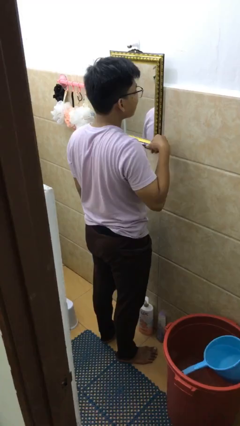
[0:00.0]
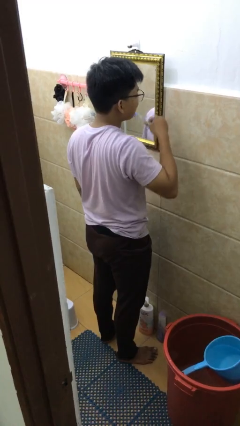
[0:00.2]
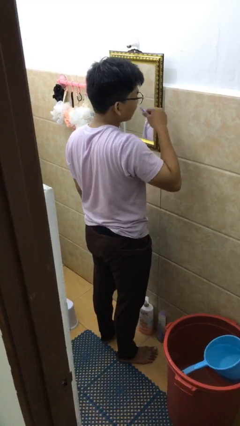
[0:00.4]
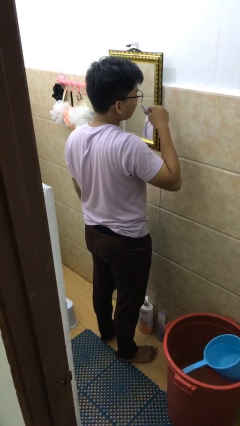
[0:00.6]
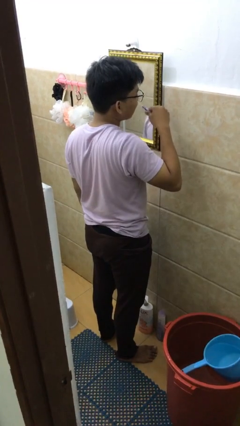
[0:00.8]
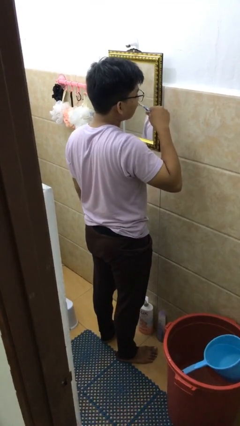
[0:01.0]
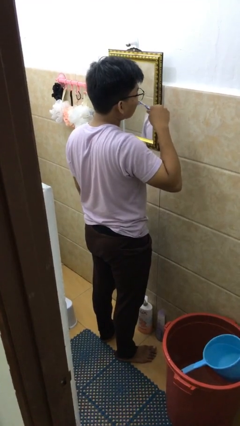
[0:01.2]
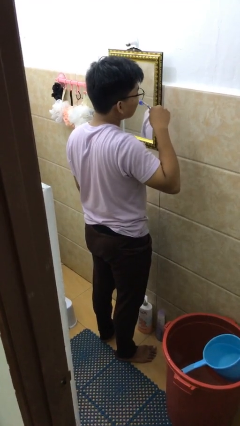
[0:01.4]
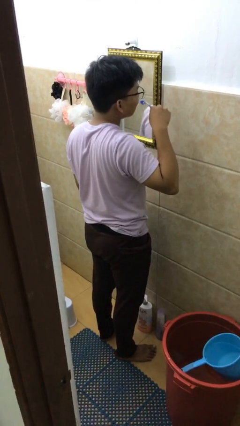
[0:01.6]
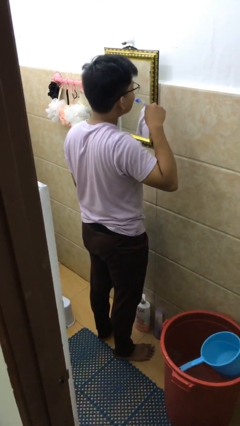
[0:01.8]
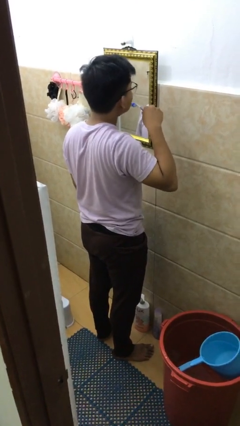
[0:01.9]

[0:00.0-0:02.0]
person brushes teeth

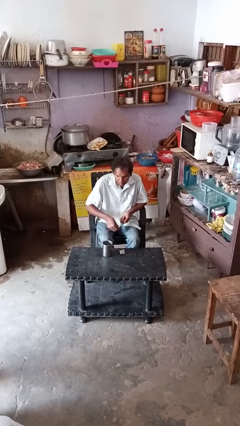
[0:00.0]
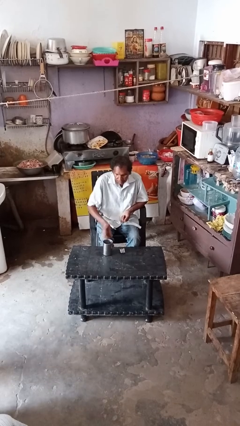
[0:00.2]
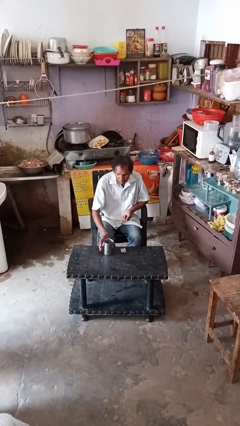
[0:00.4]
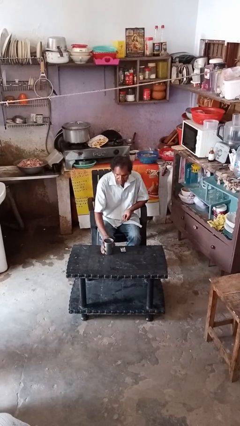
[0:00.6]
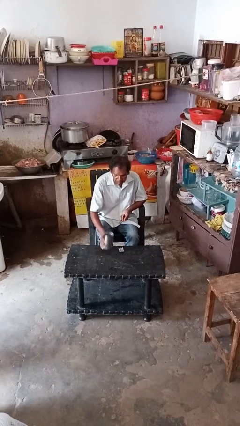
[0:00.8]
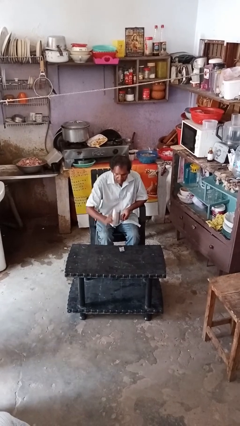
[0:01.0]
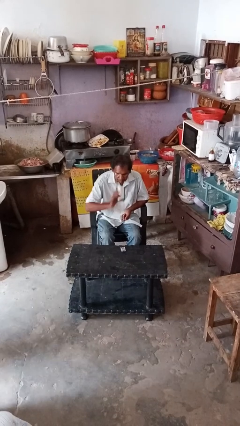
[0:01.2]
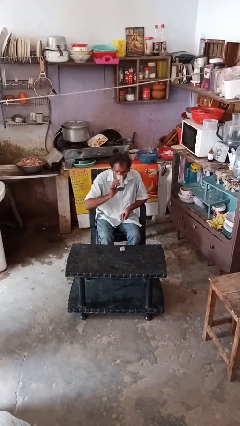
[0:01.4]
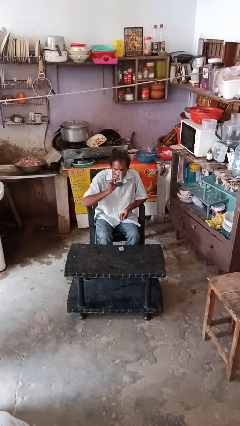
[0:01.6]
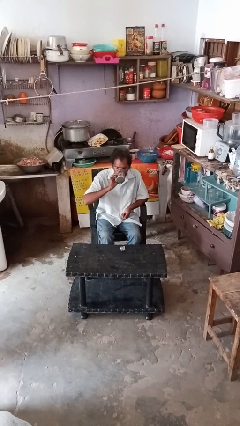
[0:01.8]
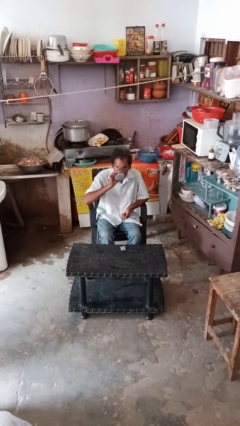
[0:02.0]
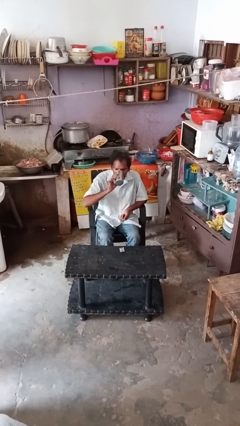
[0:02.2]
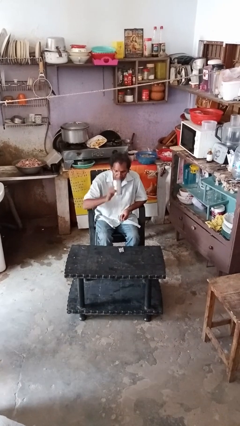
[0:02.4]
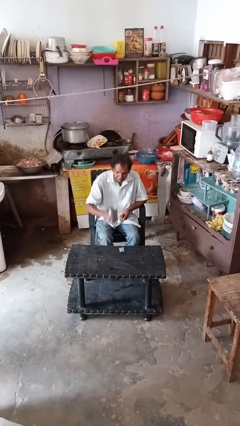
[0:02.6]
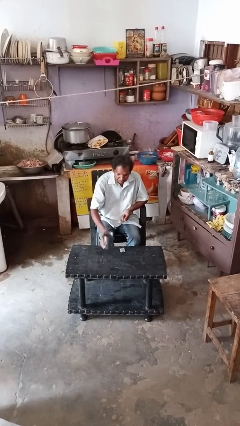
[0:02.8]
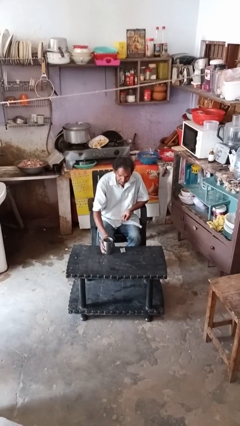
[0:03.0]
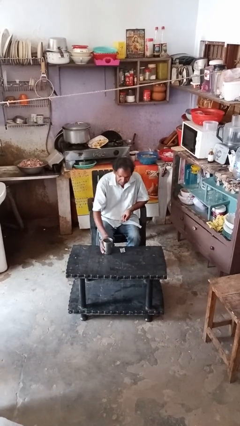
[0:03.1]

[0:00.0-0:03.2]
person drinks from cup

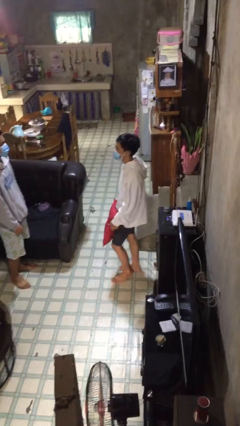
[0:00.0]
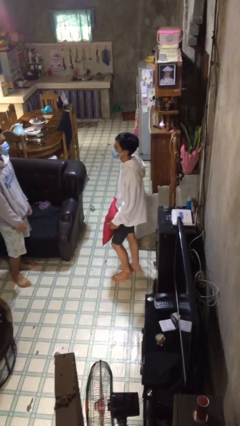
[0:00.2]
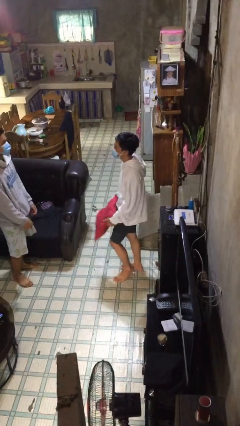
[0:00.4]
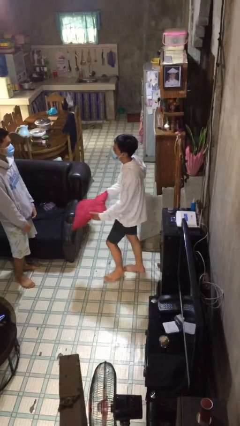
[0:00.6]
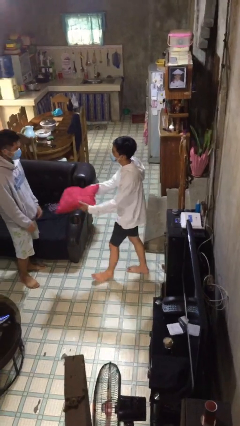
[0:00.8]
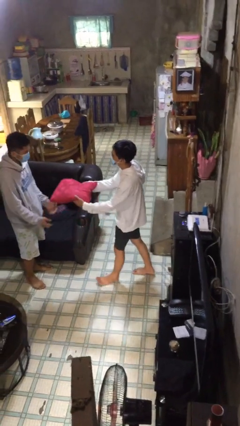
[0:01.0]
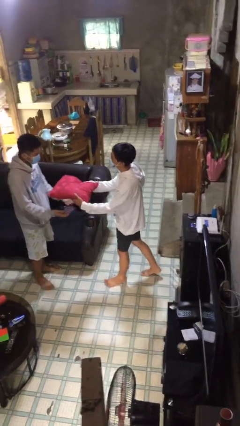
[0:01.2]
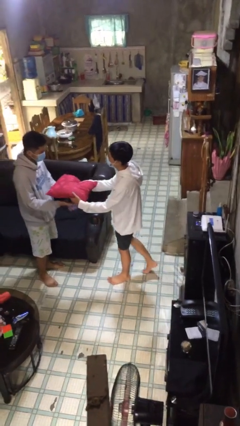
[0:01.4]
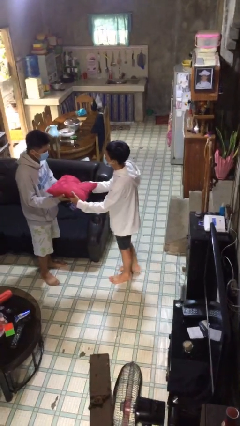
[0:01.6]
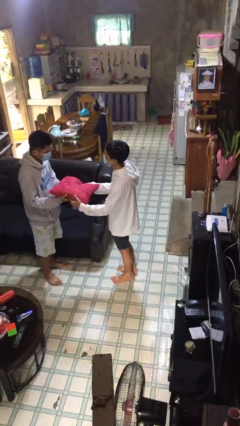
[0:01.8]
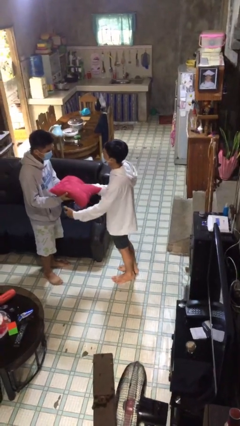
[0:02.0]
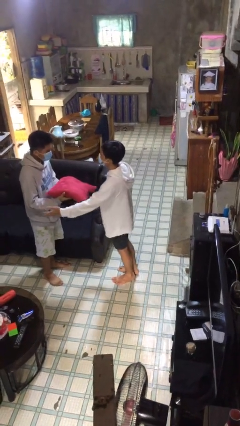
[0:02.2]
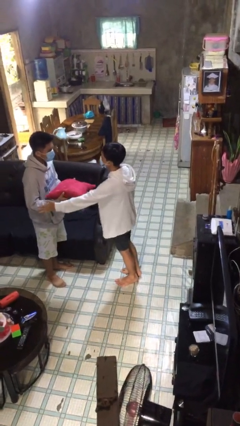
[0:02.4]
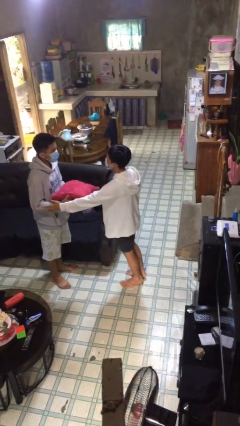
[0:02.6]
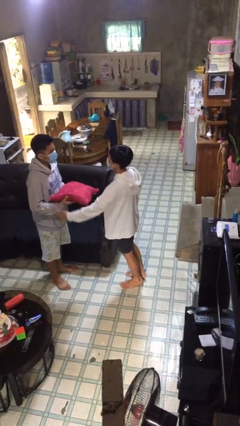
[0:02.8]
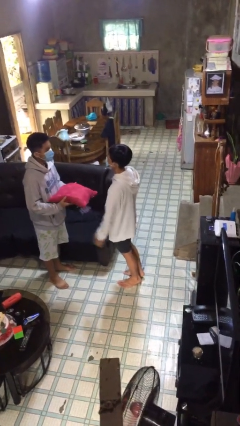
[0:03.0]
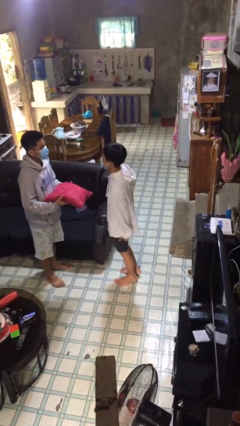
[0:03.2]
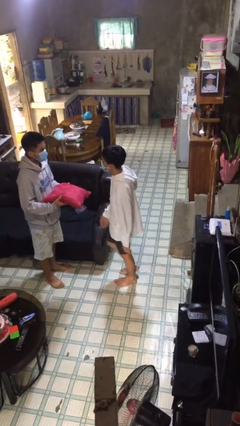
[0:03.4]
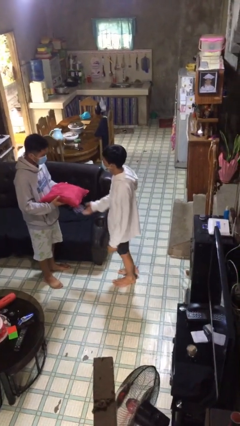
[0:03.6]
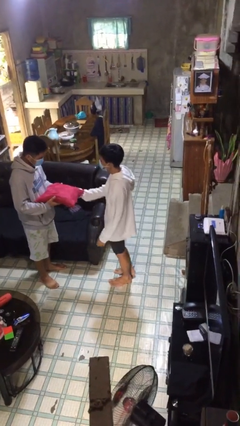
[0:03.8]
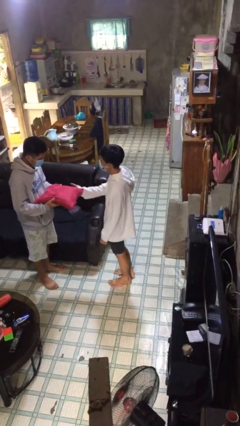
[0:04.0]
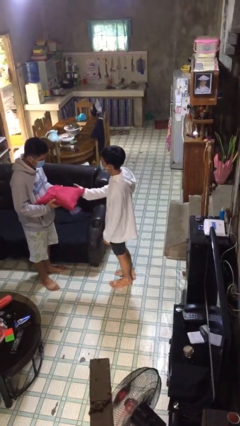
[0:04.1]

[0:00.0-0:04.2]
person transfers object to person

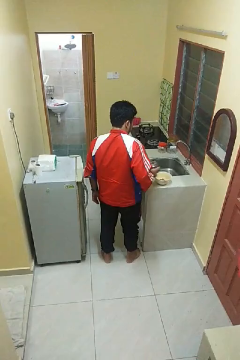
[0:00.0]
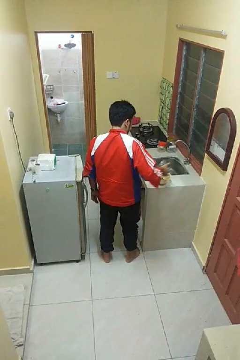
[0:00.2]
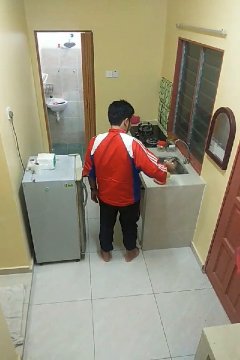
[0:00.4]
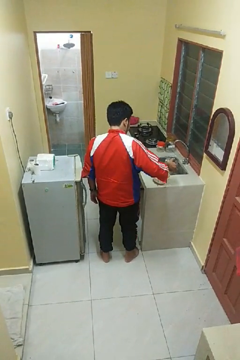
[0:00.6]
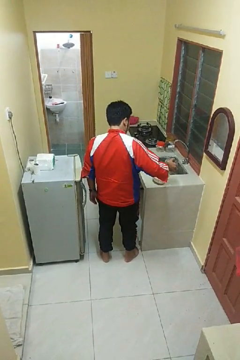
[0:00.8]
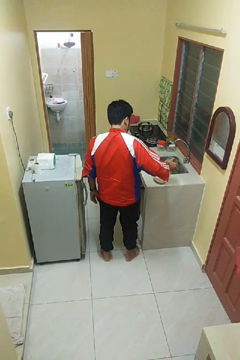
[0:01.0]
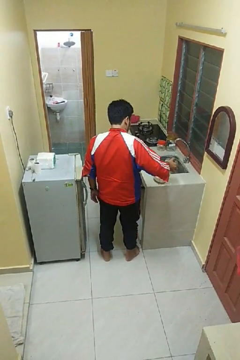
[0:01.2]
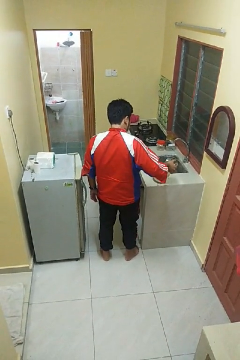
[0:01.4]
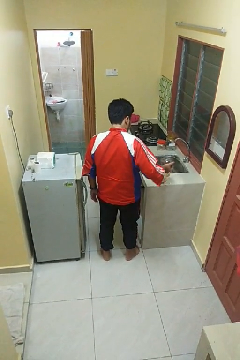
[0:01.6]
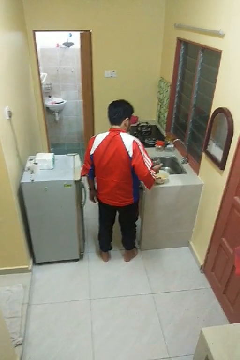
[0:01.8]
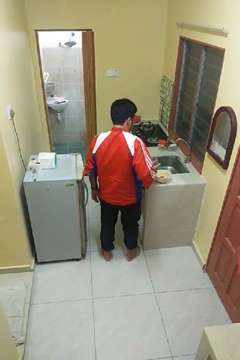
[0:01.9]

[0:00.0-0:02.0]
person pours into bowl

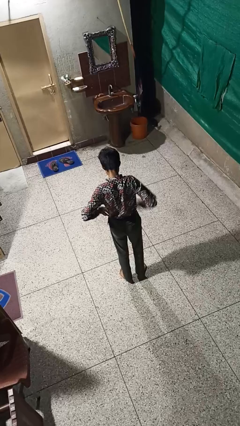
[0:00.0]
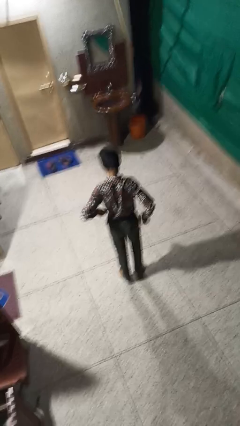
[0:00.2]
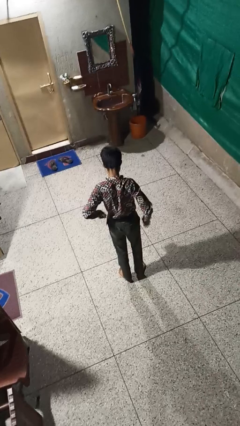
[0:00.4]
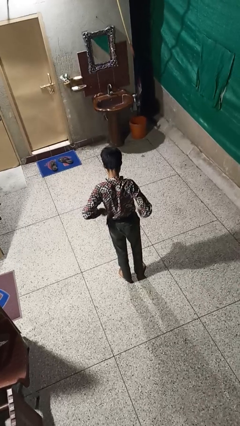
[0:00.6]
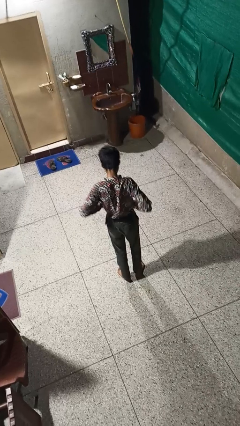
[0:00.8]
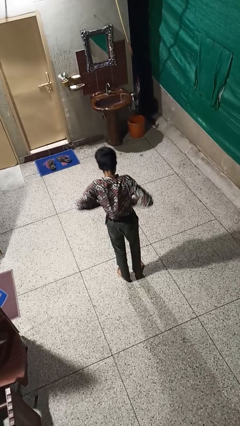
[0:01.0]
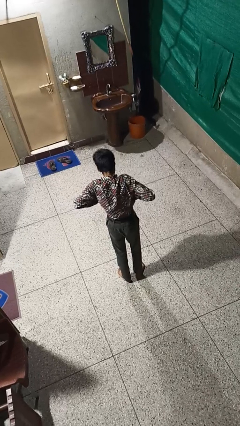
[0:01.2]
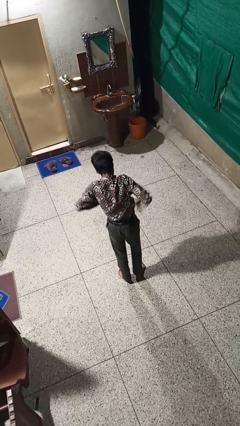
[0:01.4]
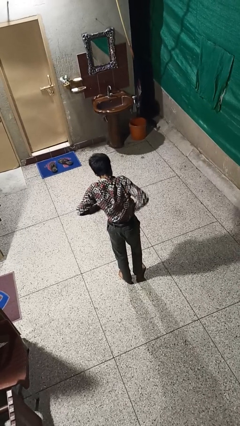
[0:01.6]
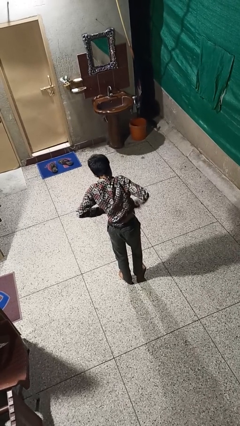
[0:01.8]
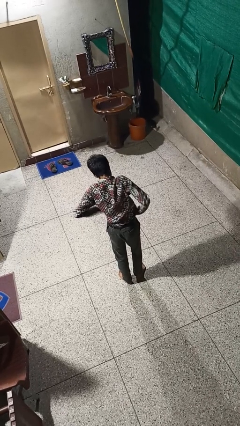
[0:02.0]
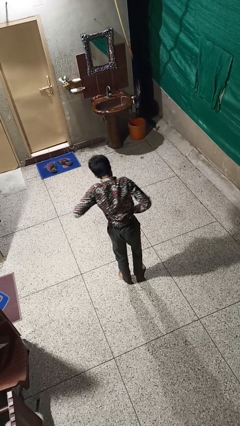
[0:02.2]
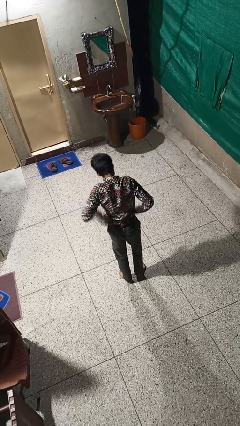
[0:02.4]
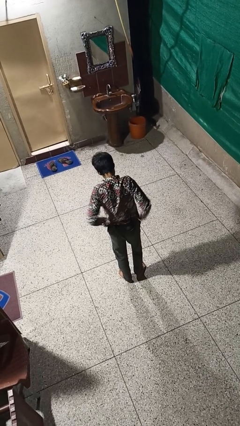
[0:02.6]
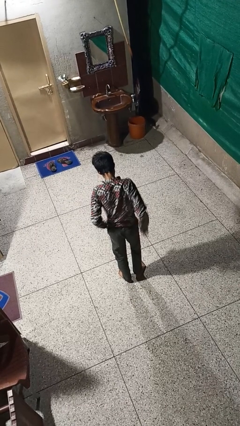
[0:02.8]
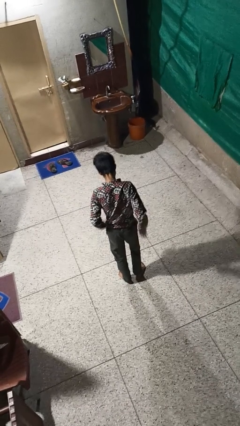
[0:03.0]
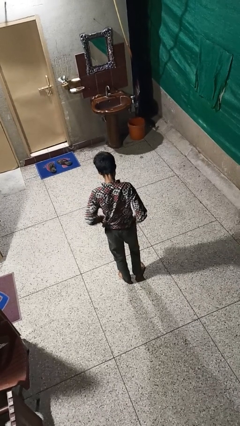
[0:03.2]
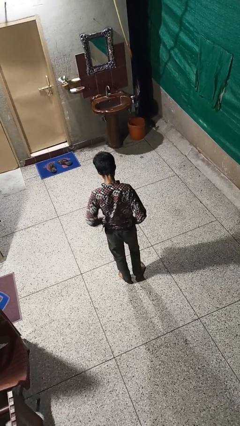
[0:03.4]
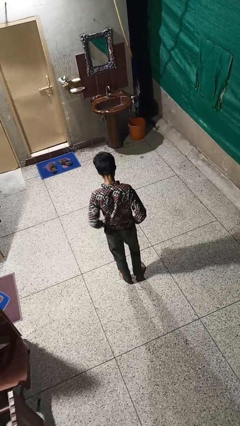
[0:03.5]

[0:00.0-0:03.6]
person untucks shirt

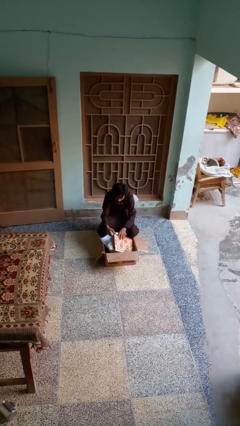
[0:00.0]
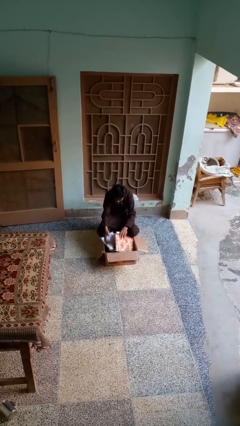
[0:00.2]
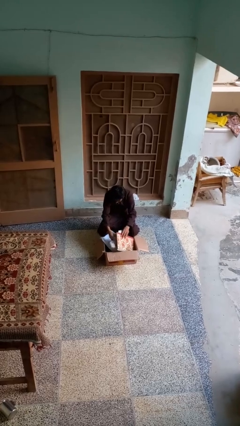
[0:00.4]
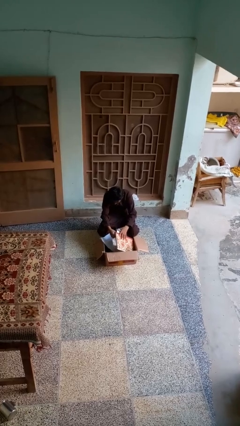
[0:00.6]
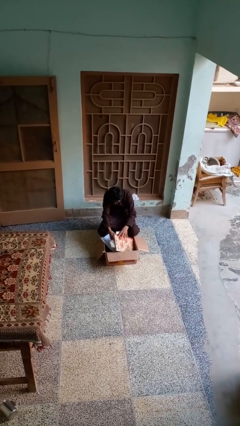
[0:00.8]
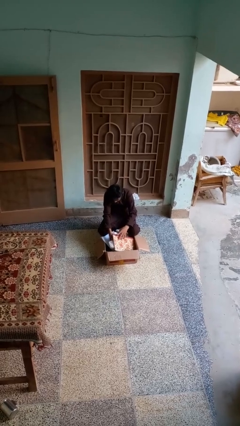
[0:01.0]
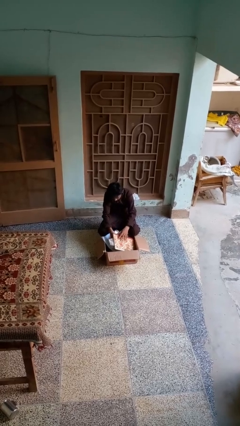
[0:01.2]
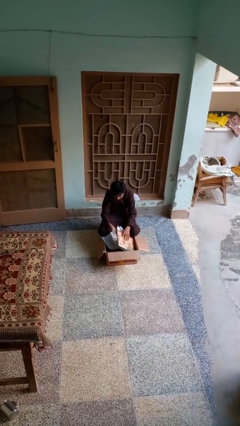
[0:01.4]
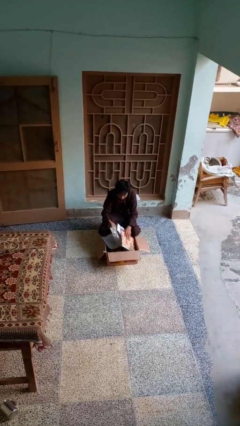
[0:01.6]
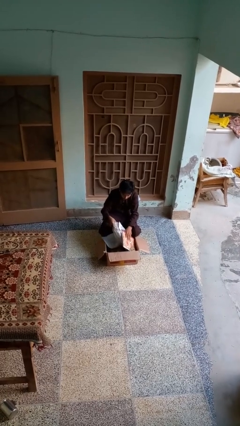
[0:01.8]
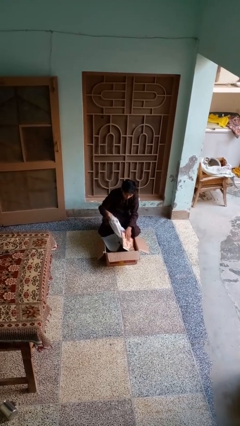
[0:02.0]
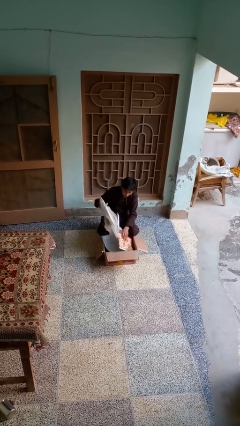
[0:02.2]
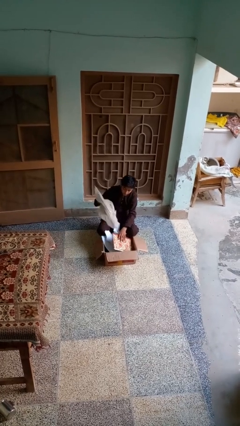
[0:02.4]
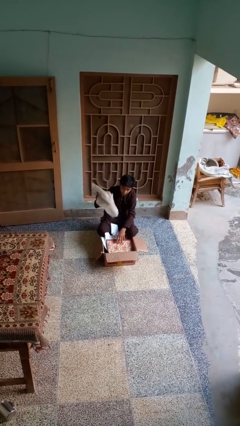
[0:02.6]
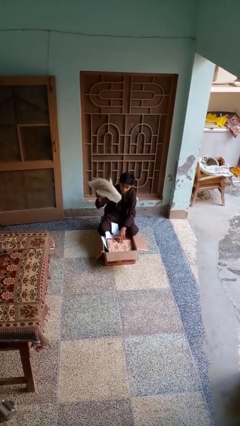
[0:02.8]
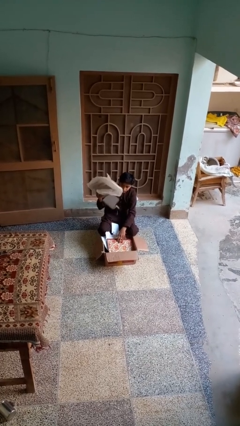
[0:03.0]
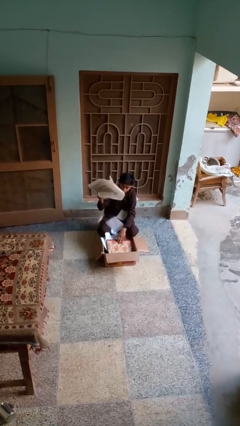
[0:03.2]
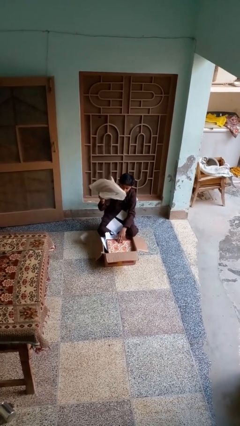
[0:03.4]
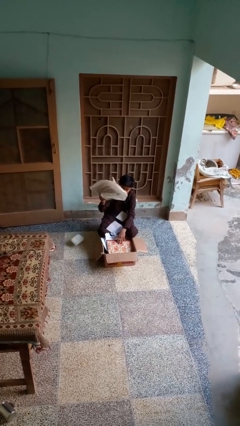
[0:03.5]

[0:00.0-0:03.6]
person takes object from box
